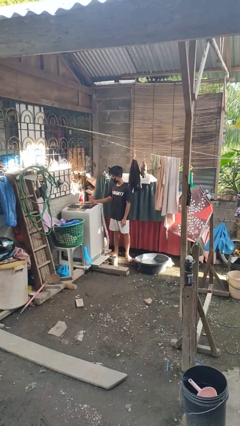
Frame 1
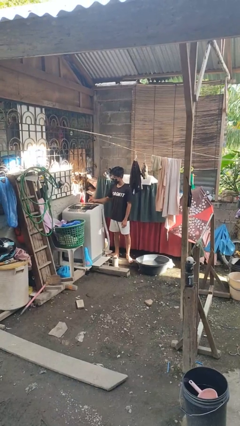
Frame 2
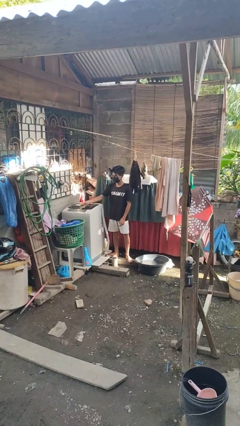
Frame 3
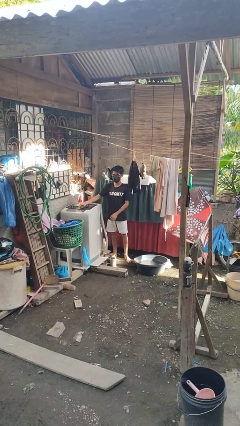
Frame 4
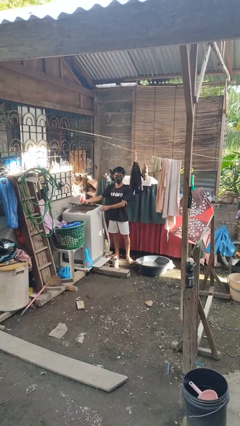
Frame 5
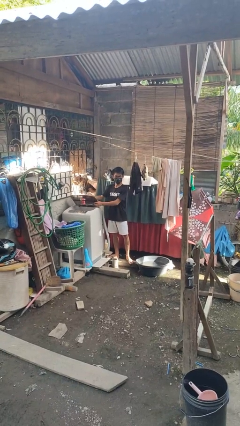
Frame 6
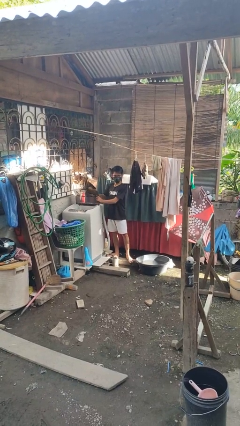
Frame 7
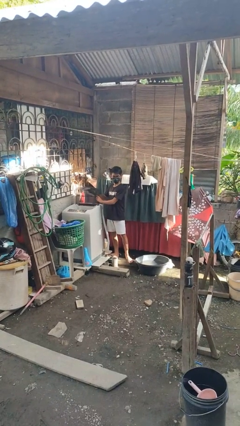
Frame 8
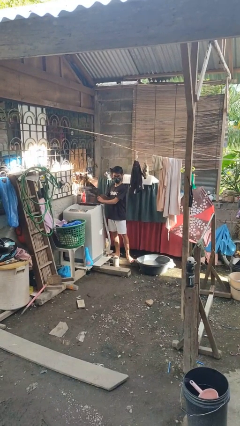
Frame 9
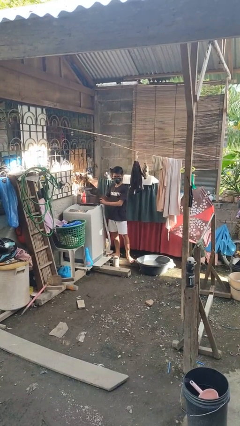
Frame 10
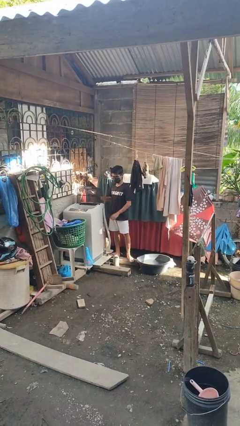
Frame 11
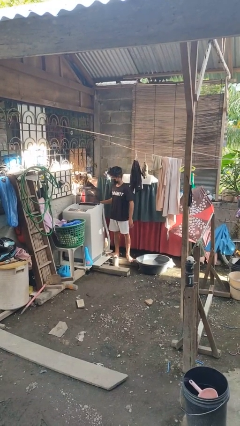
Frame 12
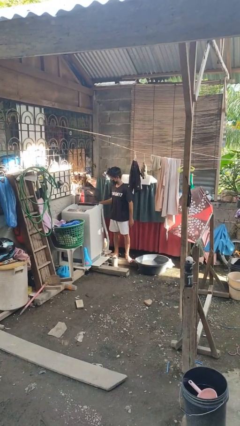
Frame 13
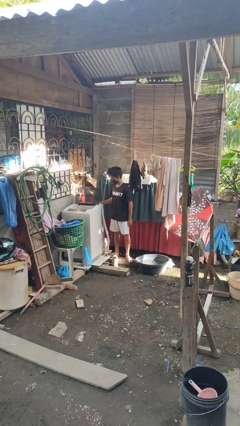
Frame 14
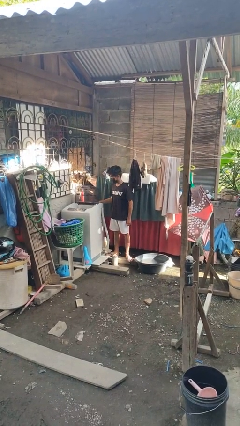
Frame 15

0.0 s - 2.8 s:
person opens clothes washer

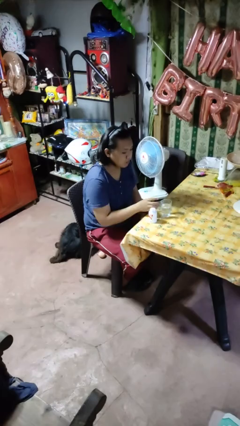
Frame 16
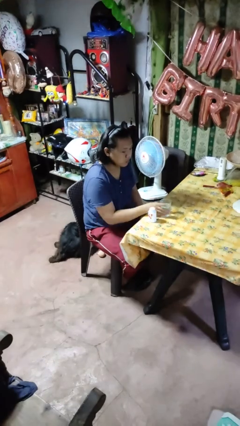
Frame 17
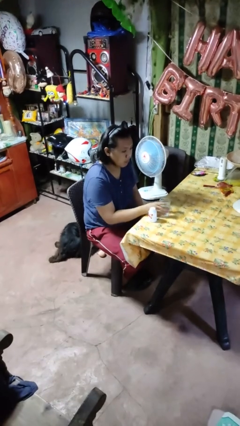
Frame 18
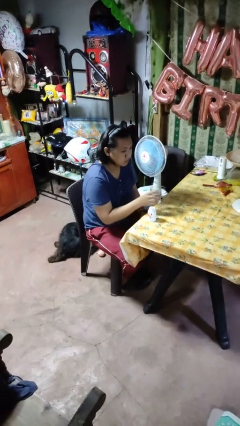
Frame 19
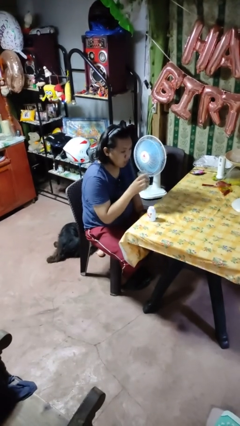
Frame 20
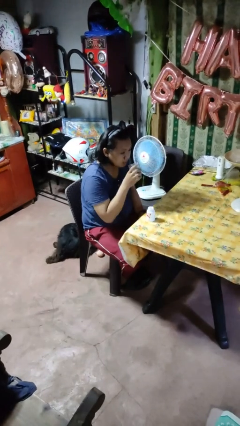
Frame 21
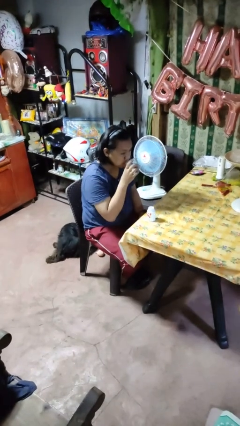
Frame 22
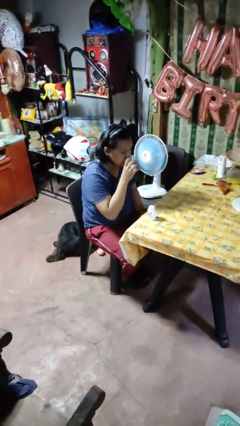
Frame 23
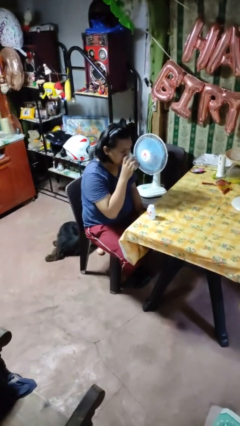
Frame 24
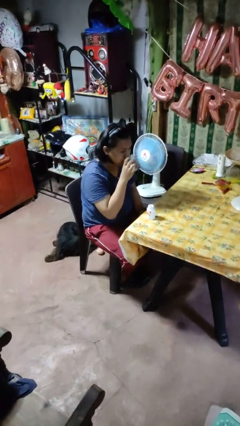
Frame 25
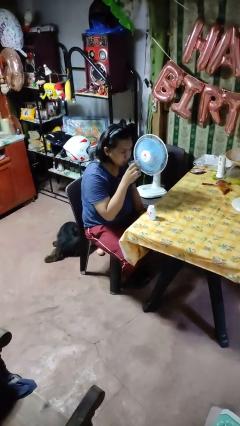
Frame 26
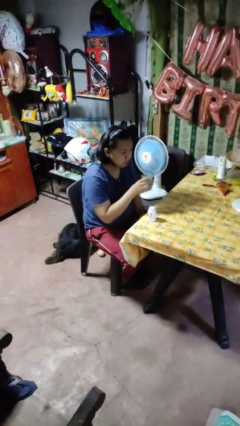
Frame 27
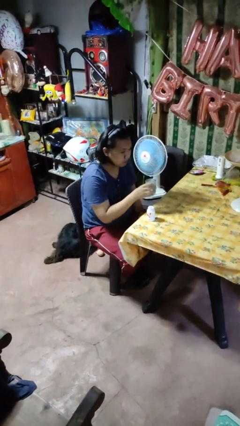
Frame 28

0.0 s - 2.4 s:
person drinks from cup

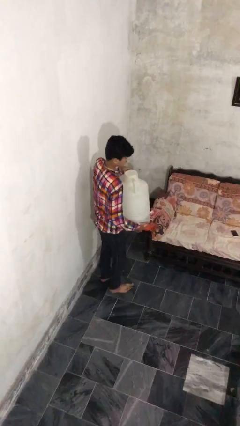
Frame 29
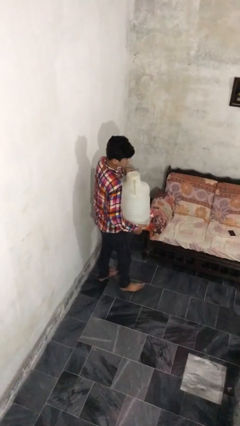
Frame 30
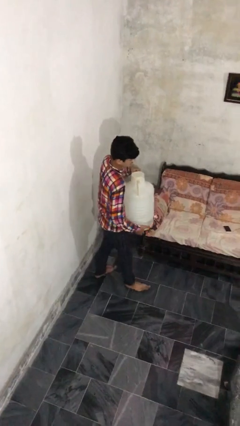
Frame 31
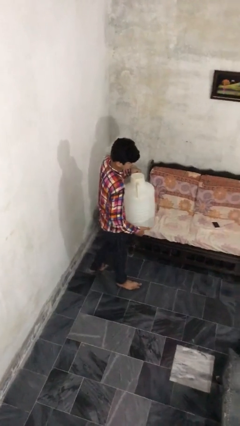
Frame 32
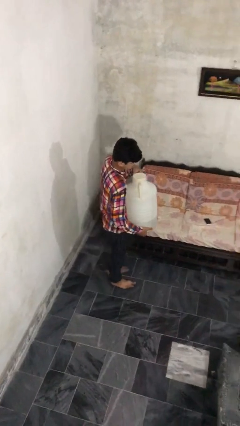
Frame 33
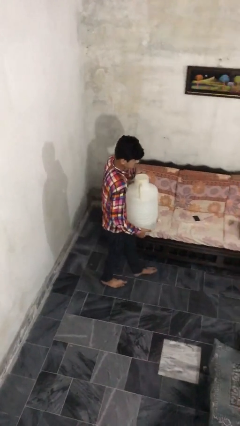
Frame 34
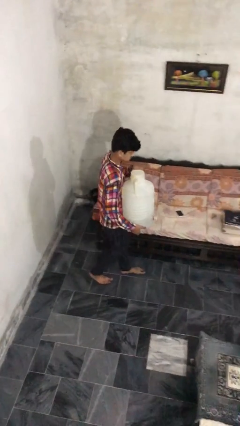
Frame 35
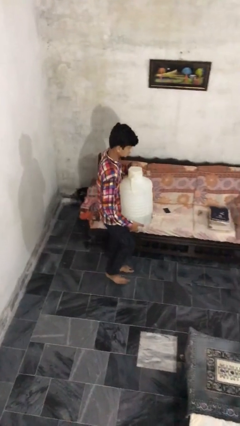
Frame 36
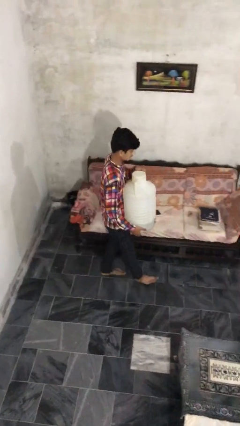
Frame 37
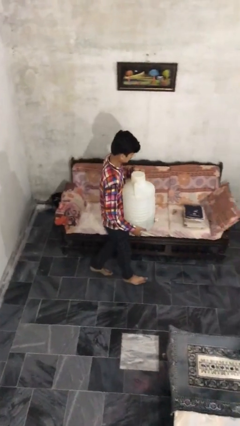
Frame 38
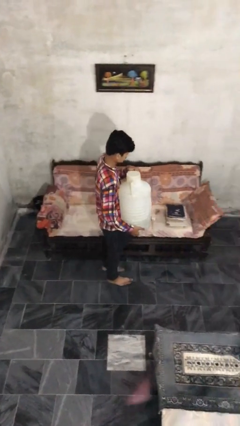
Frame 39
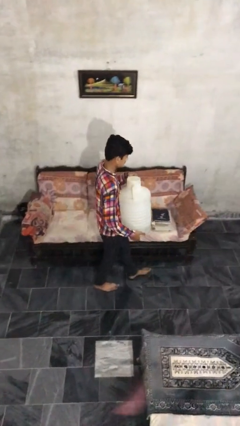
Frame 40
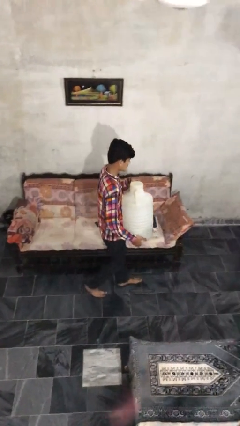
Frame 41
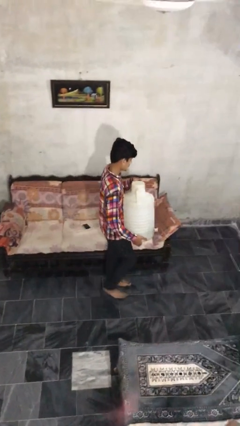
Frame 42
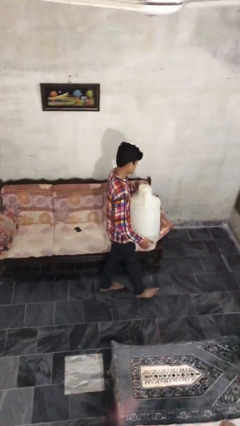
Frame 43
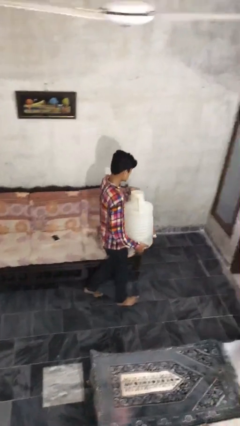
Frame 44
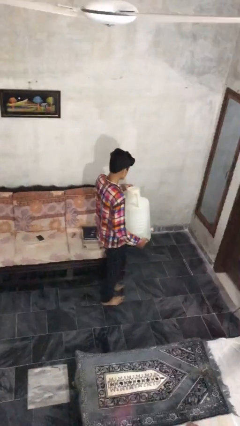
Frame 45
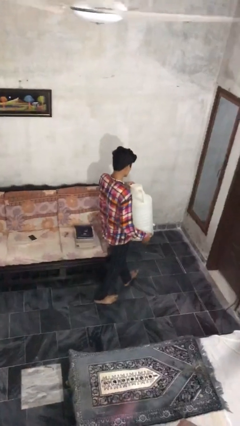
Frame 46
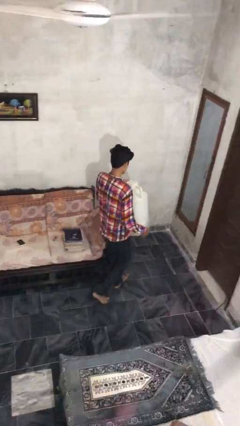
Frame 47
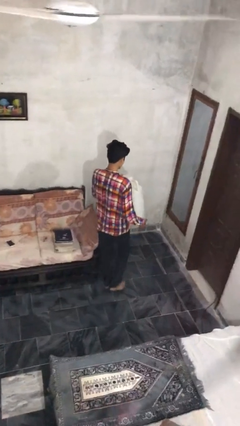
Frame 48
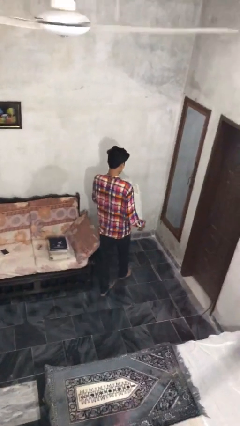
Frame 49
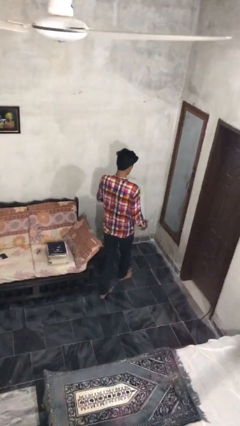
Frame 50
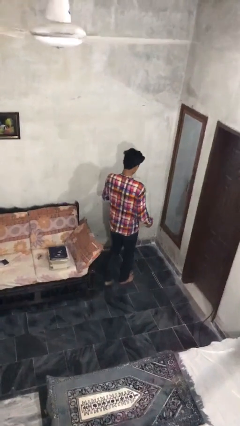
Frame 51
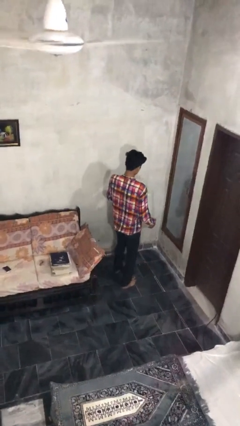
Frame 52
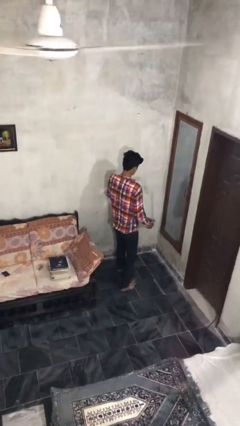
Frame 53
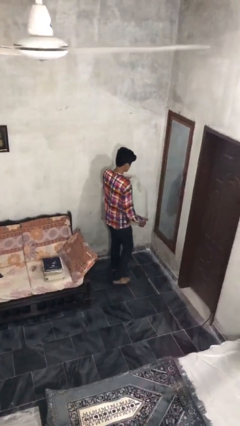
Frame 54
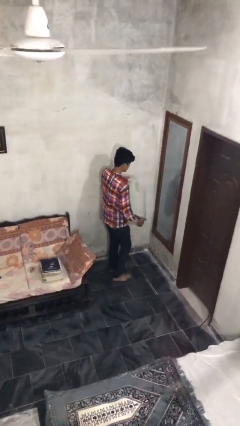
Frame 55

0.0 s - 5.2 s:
person carries heavy object

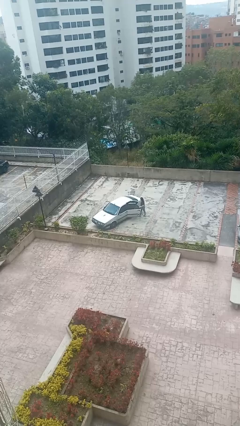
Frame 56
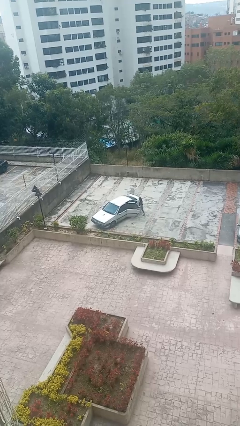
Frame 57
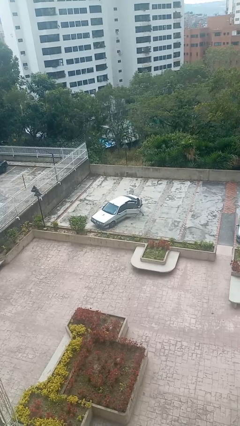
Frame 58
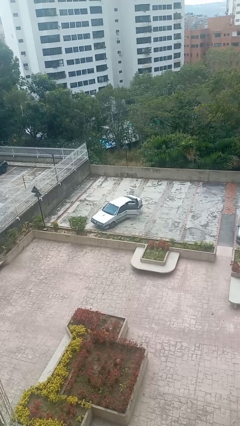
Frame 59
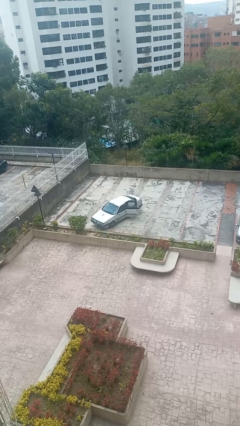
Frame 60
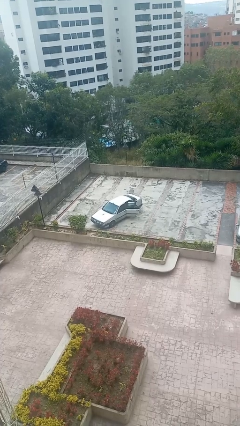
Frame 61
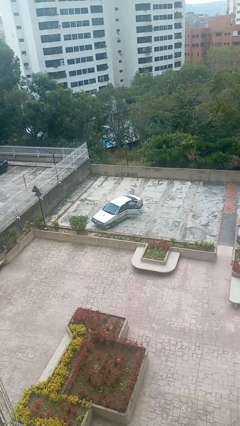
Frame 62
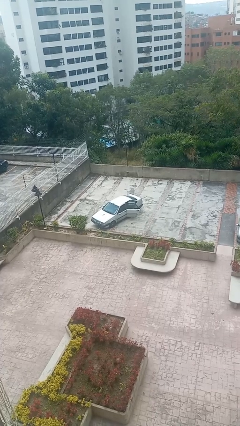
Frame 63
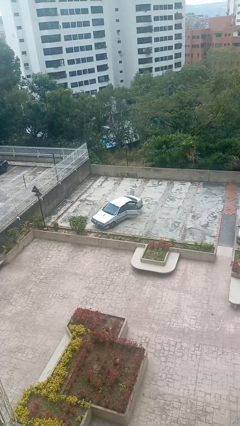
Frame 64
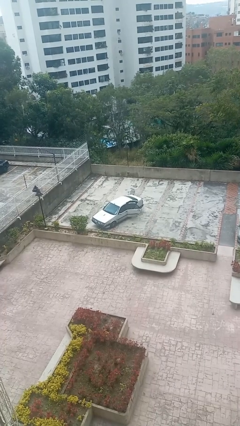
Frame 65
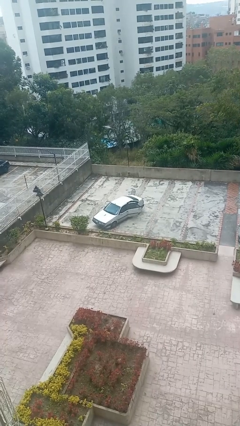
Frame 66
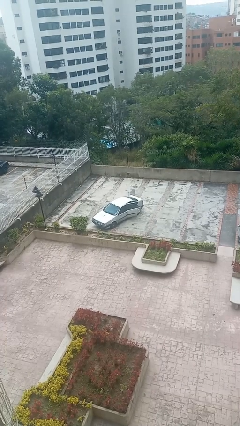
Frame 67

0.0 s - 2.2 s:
car picks up person

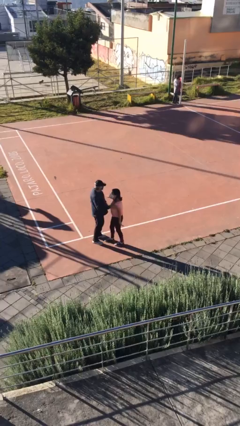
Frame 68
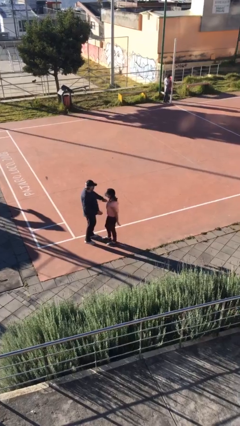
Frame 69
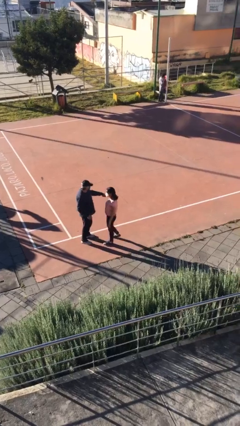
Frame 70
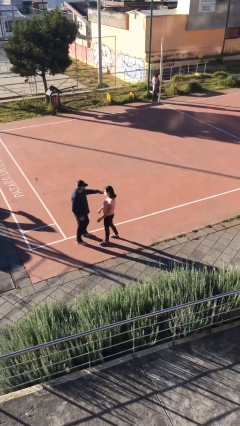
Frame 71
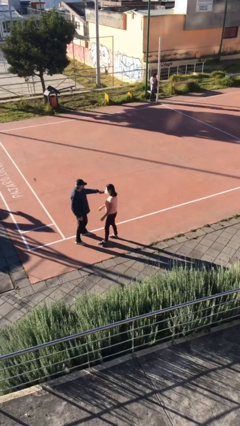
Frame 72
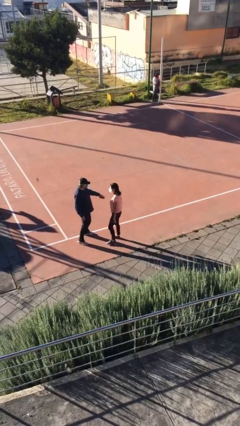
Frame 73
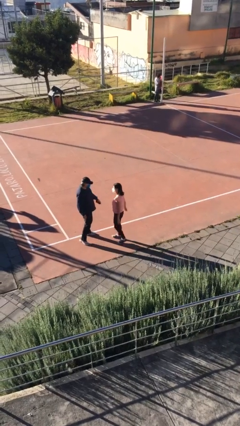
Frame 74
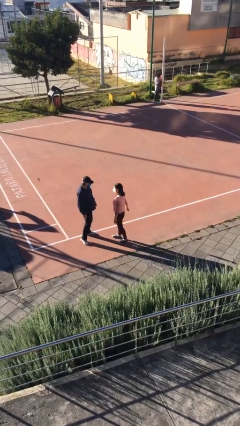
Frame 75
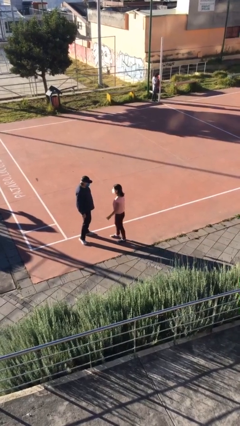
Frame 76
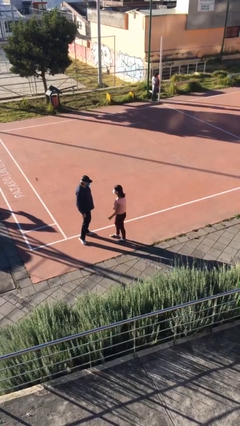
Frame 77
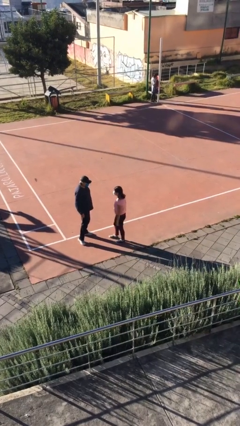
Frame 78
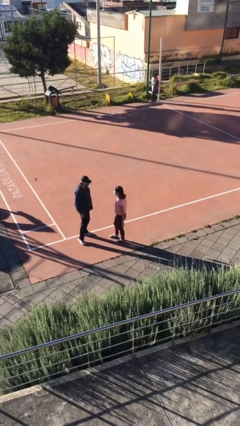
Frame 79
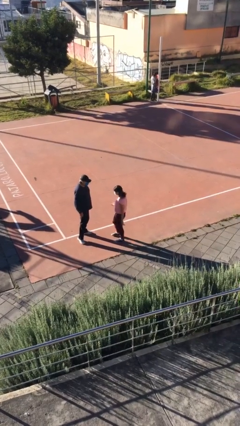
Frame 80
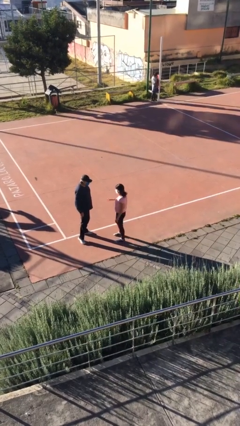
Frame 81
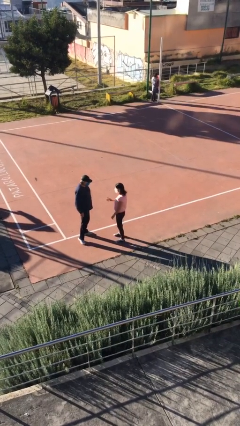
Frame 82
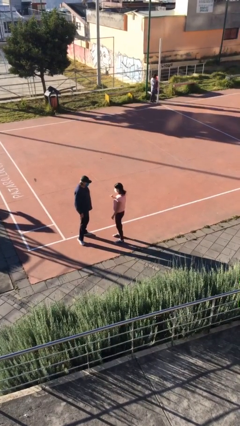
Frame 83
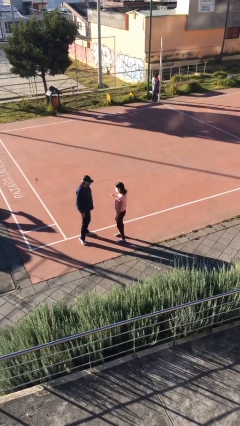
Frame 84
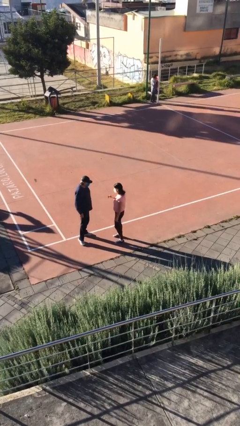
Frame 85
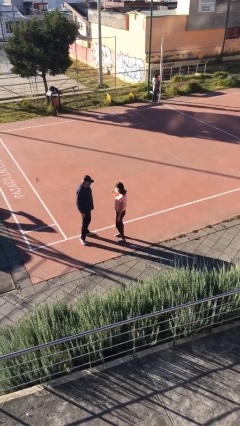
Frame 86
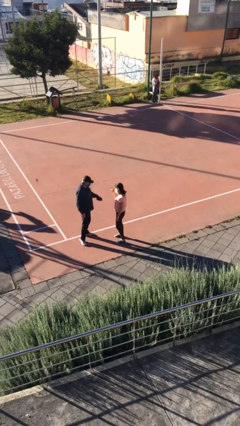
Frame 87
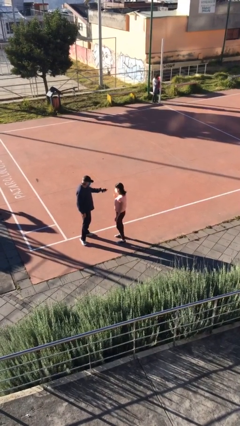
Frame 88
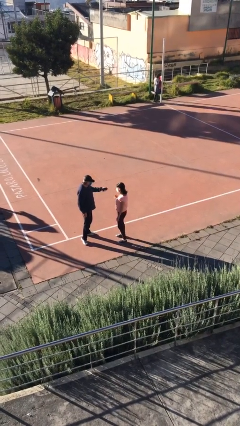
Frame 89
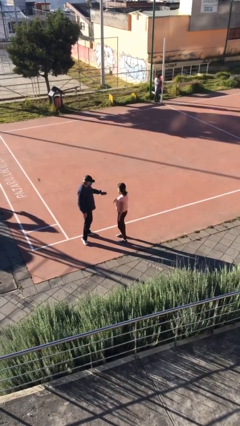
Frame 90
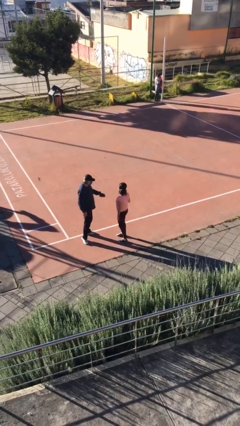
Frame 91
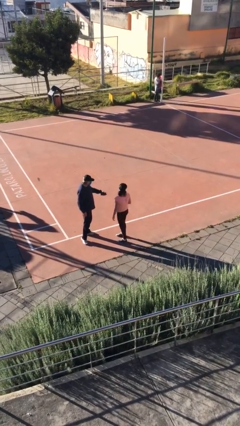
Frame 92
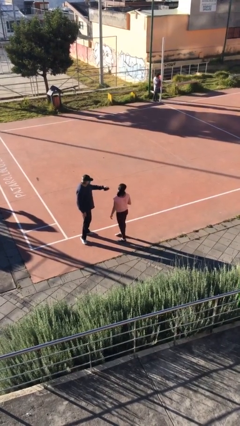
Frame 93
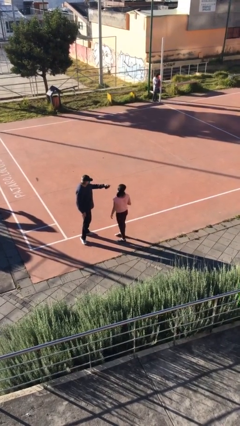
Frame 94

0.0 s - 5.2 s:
person talks to person
